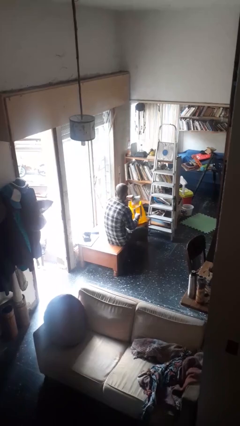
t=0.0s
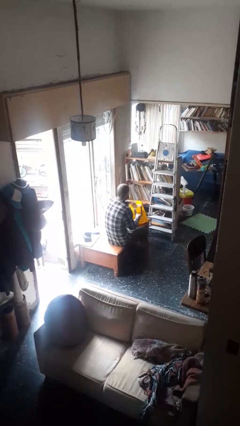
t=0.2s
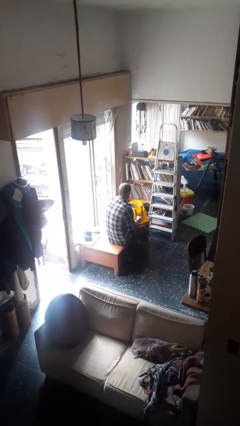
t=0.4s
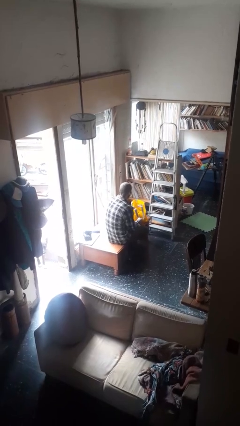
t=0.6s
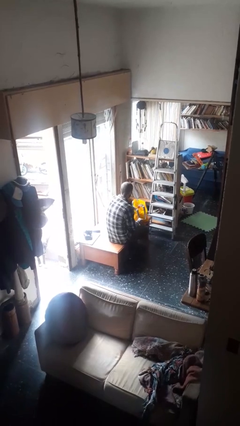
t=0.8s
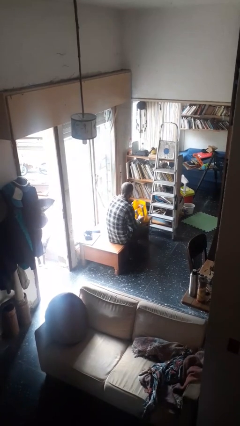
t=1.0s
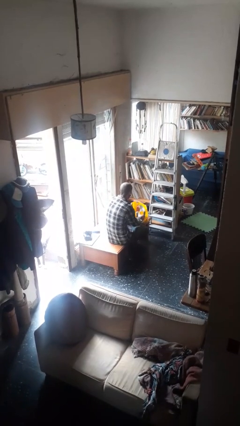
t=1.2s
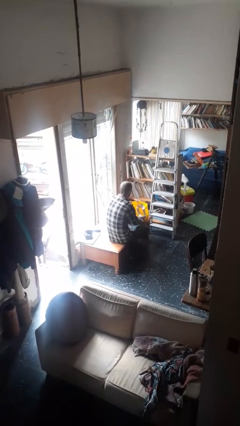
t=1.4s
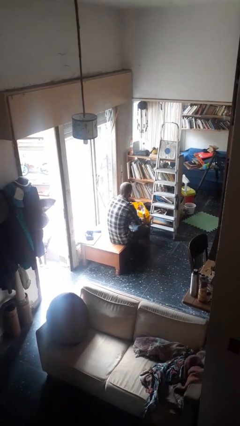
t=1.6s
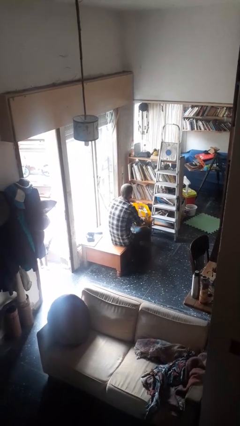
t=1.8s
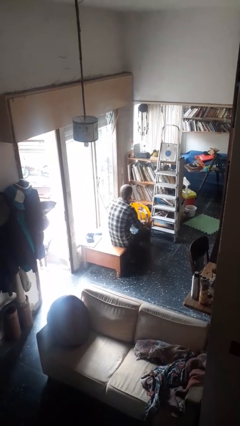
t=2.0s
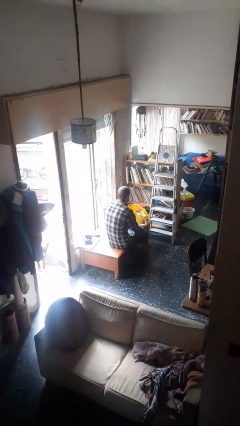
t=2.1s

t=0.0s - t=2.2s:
person puts object into bag

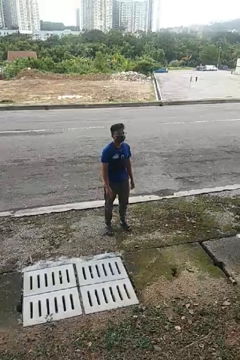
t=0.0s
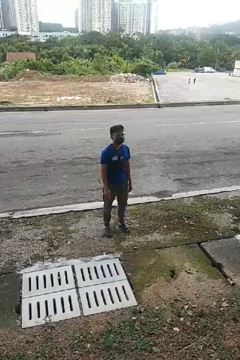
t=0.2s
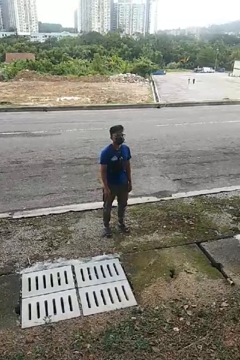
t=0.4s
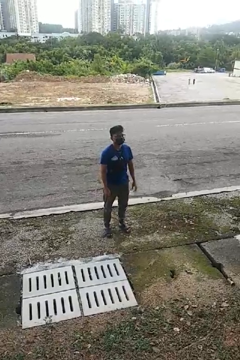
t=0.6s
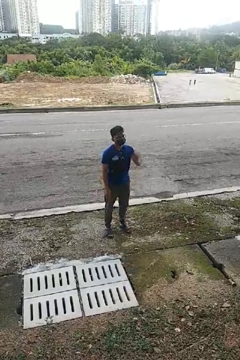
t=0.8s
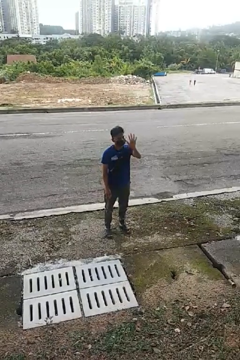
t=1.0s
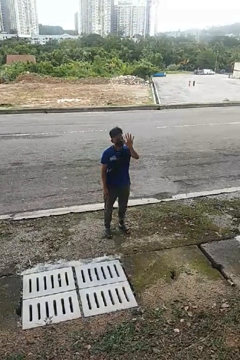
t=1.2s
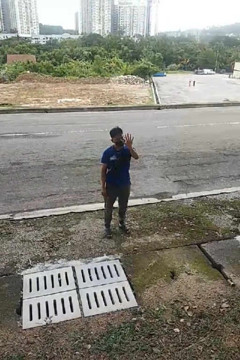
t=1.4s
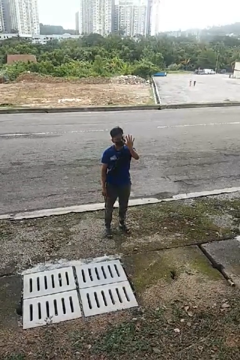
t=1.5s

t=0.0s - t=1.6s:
person gestures stop

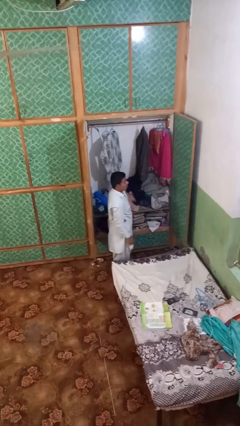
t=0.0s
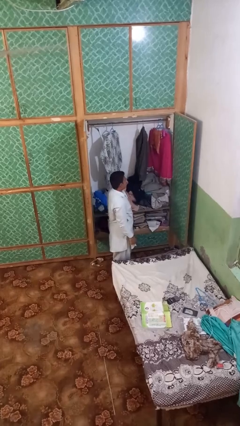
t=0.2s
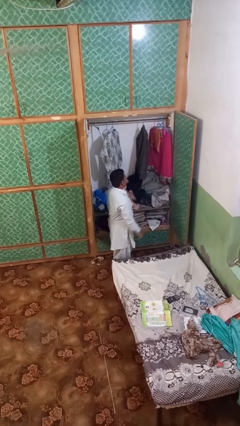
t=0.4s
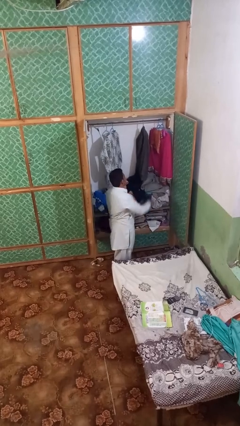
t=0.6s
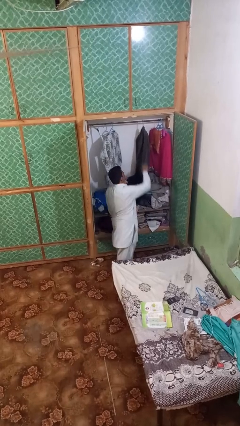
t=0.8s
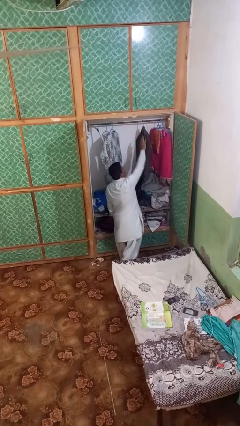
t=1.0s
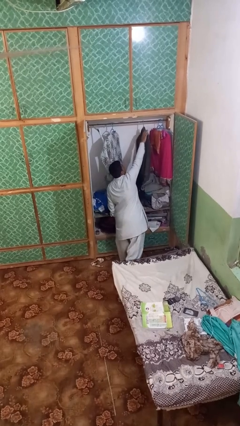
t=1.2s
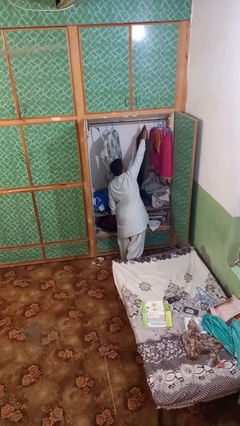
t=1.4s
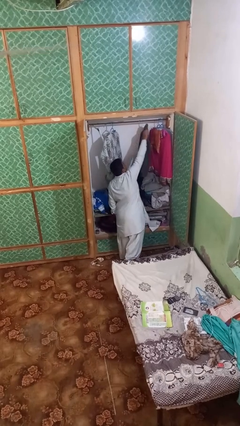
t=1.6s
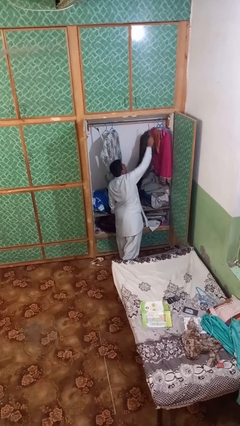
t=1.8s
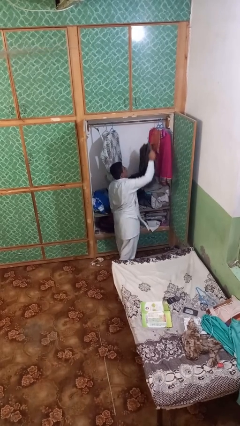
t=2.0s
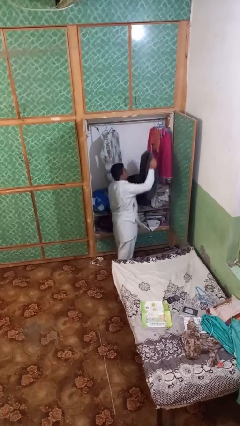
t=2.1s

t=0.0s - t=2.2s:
person takes clothes from closet

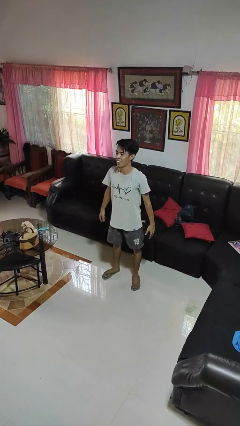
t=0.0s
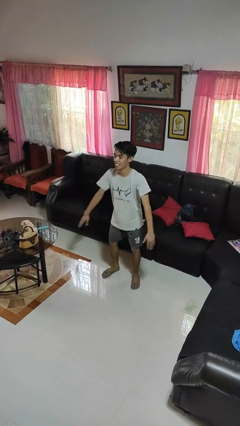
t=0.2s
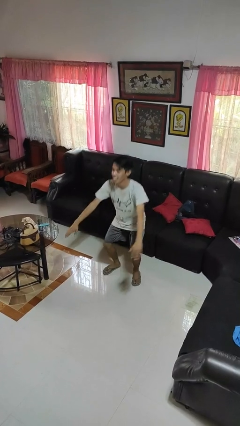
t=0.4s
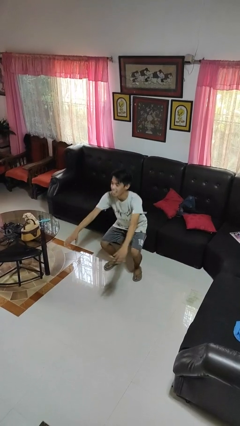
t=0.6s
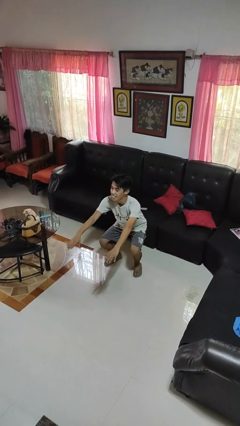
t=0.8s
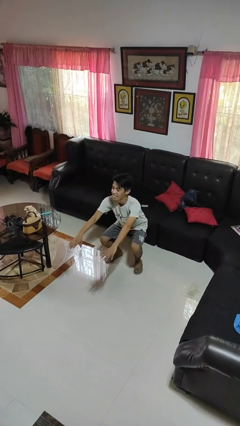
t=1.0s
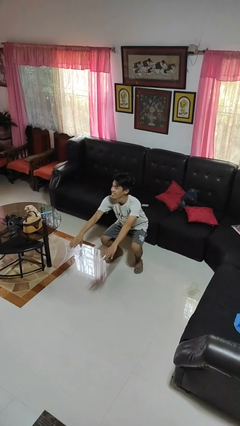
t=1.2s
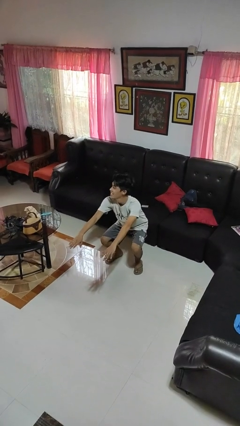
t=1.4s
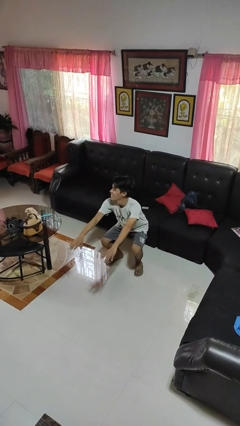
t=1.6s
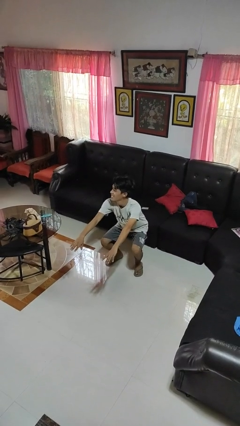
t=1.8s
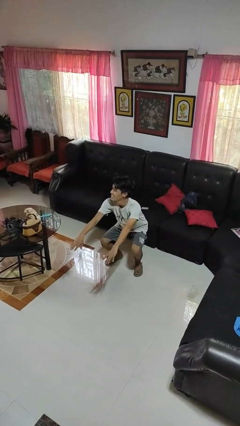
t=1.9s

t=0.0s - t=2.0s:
person squats

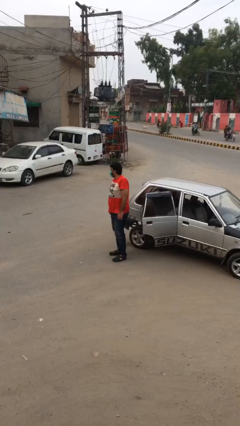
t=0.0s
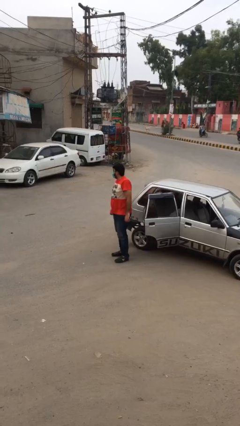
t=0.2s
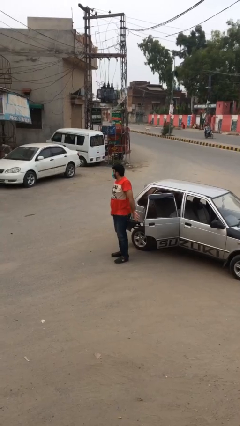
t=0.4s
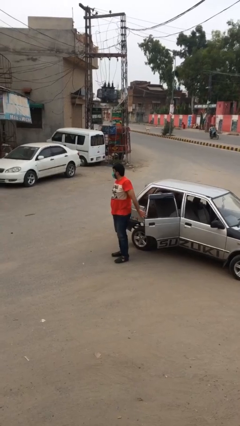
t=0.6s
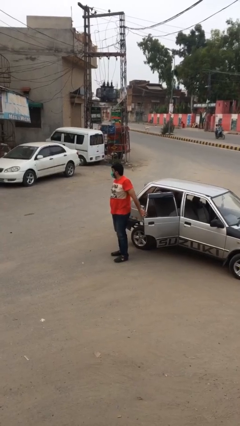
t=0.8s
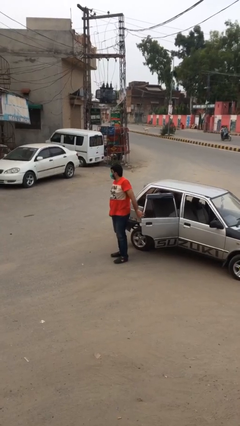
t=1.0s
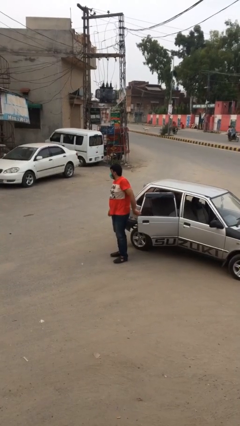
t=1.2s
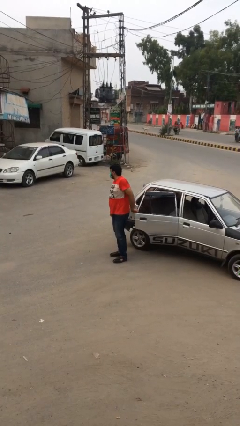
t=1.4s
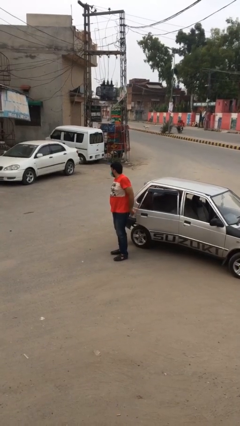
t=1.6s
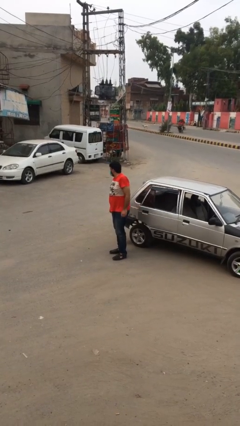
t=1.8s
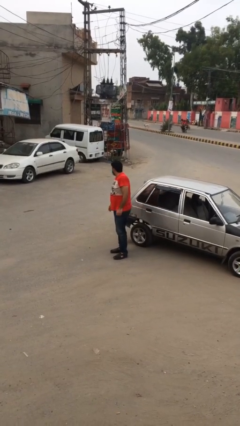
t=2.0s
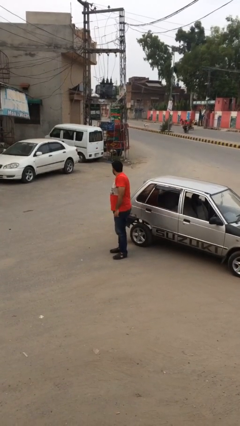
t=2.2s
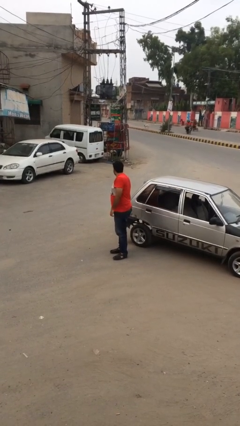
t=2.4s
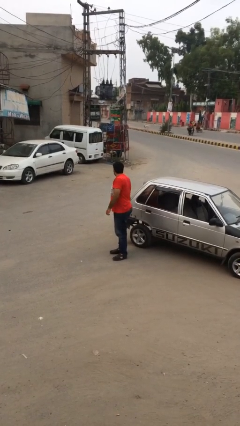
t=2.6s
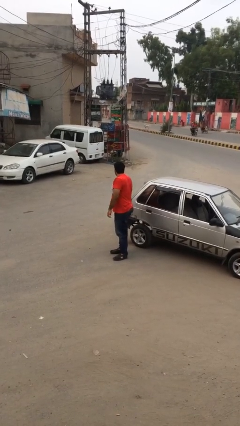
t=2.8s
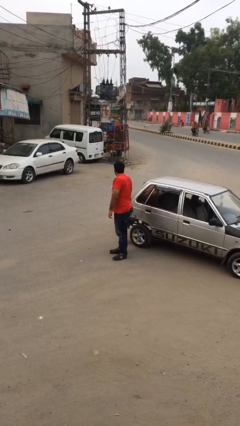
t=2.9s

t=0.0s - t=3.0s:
person closes car door

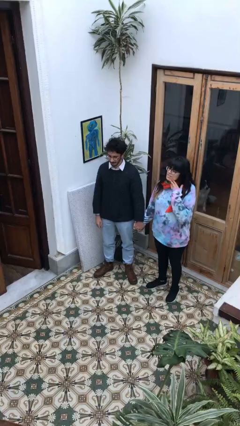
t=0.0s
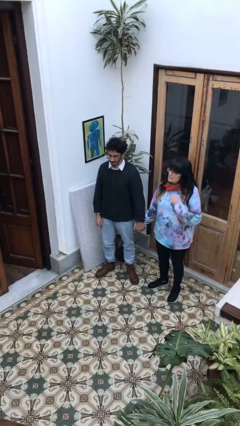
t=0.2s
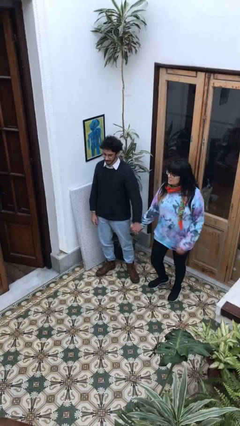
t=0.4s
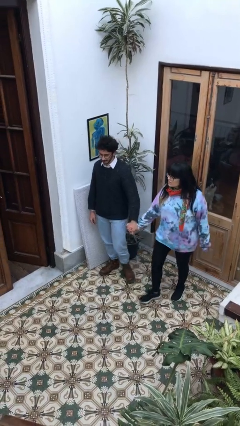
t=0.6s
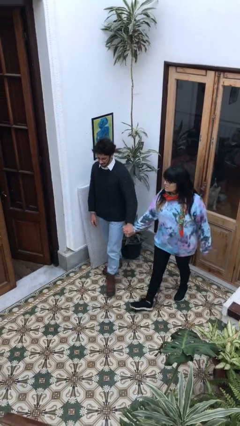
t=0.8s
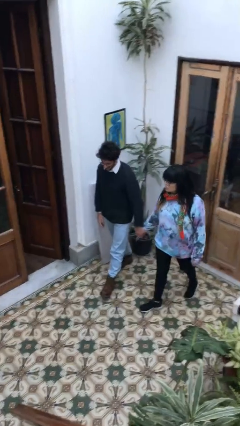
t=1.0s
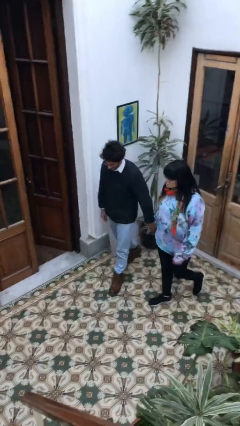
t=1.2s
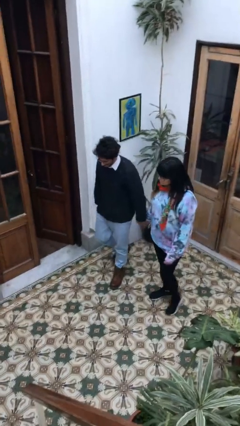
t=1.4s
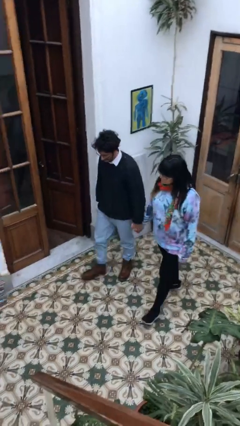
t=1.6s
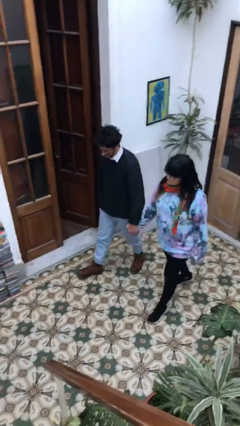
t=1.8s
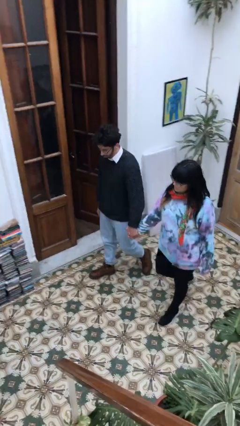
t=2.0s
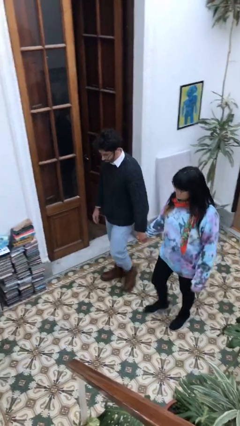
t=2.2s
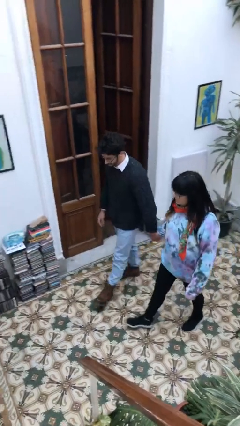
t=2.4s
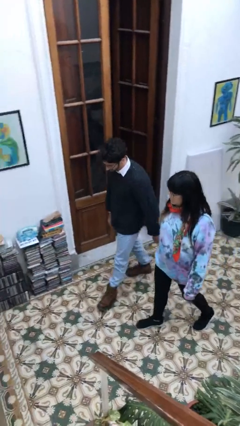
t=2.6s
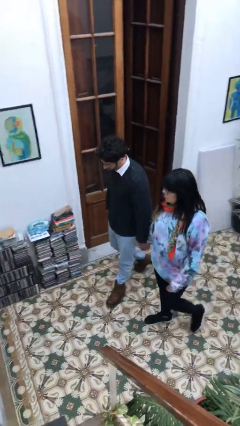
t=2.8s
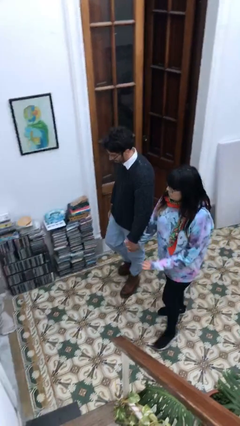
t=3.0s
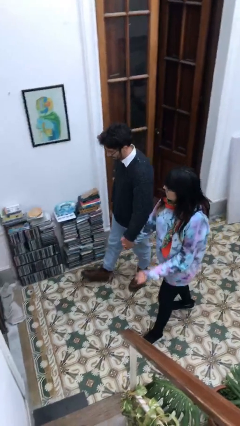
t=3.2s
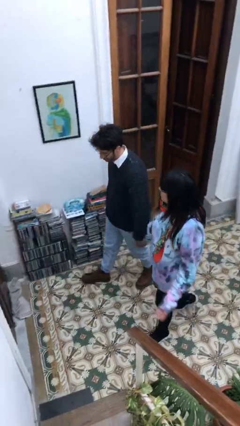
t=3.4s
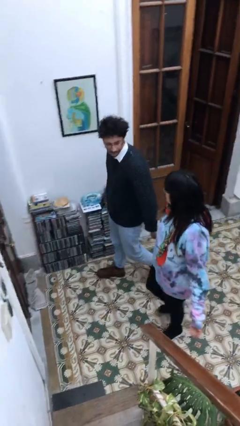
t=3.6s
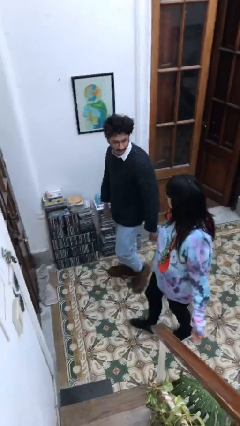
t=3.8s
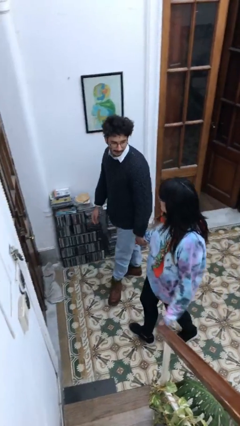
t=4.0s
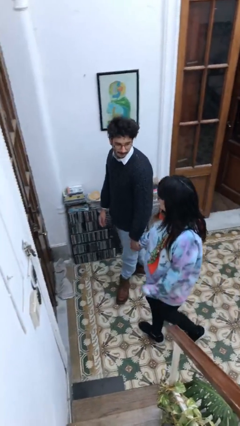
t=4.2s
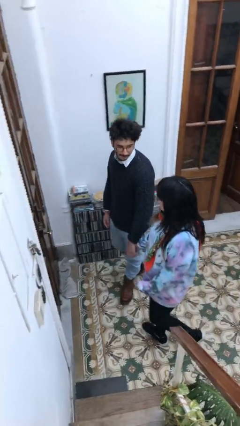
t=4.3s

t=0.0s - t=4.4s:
person holds hand

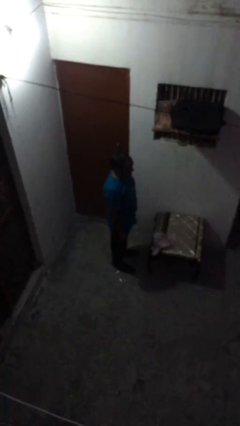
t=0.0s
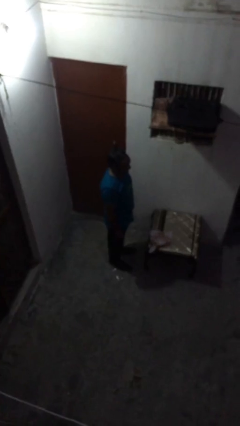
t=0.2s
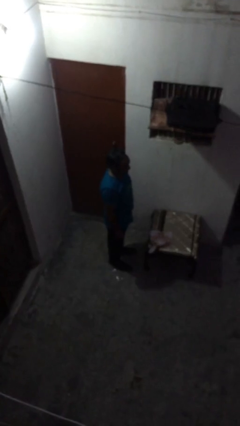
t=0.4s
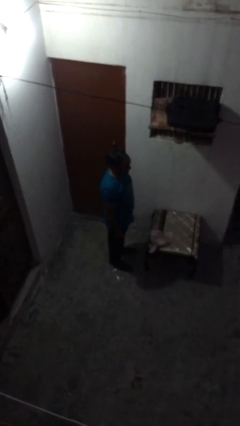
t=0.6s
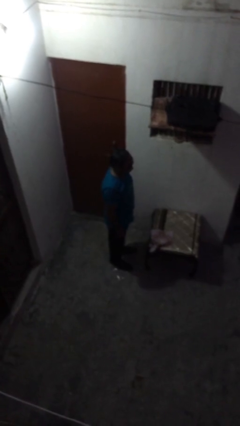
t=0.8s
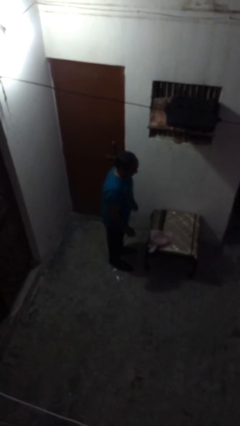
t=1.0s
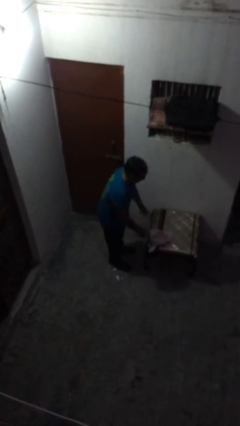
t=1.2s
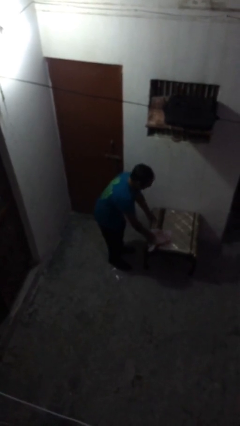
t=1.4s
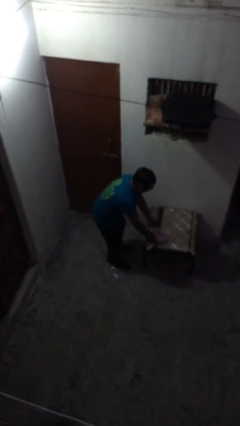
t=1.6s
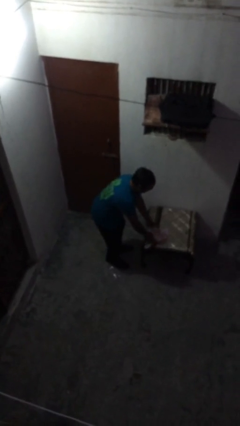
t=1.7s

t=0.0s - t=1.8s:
person picks up object from table
